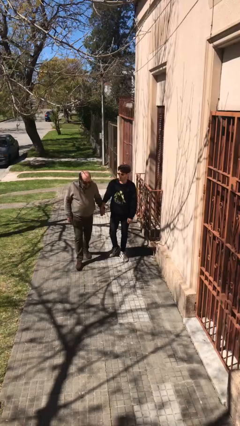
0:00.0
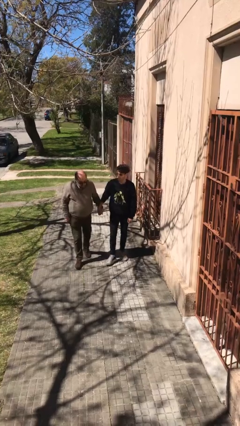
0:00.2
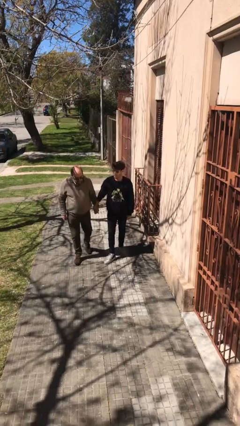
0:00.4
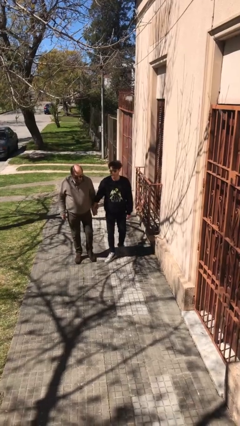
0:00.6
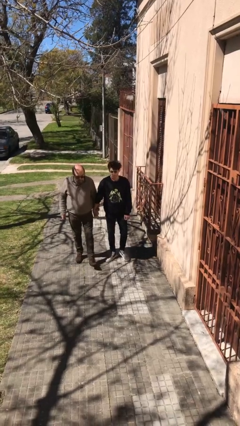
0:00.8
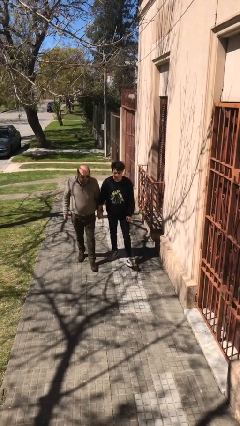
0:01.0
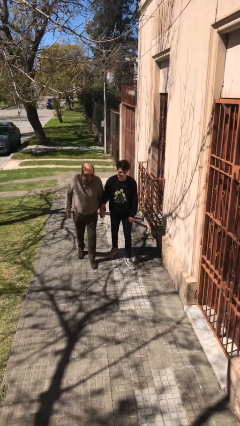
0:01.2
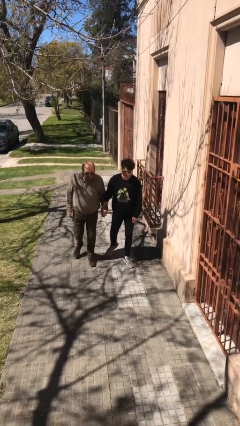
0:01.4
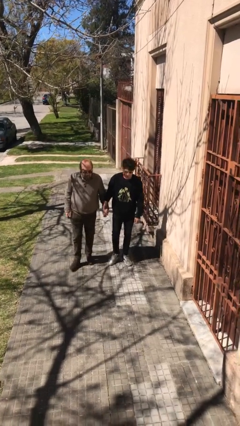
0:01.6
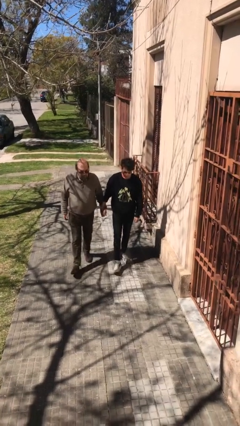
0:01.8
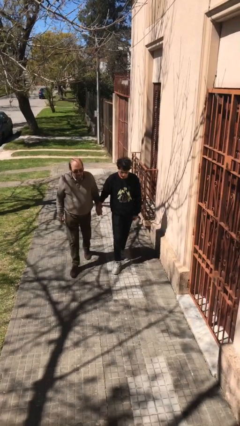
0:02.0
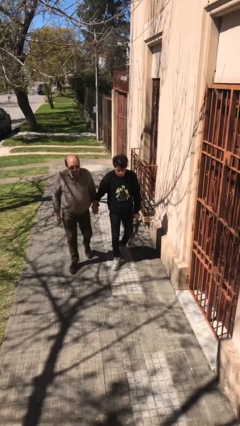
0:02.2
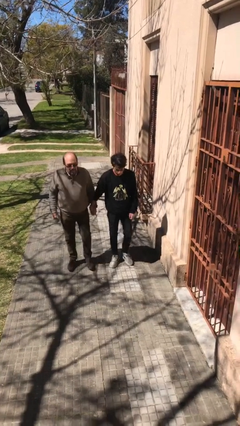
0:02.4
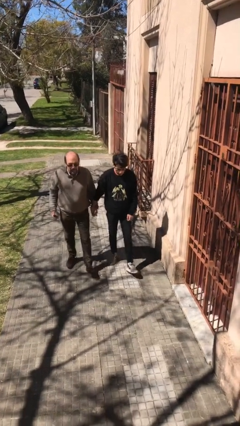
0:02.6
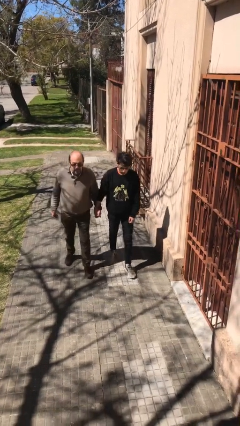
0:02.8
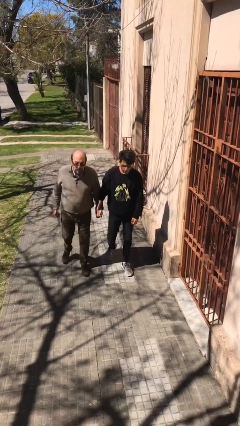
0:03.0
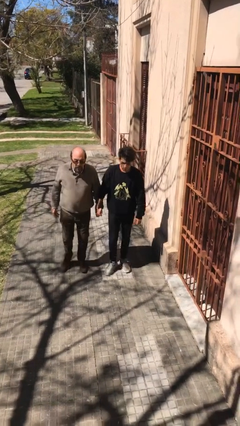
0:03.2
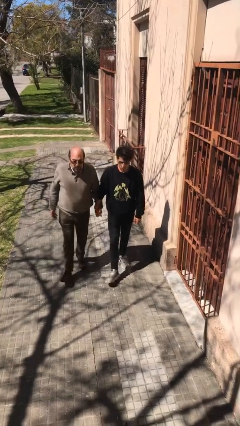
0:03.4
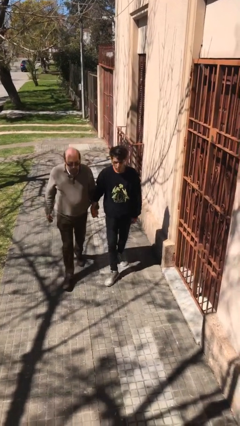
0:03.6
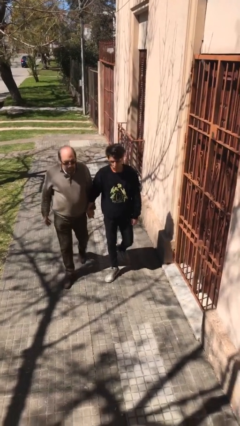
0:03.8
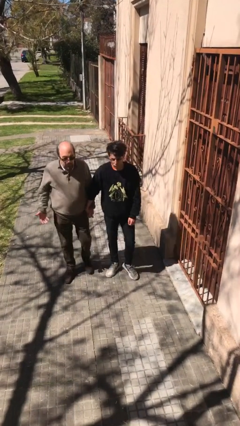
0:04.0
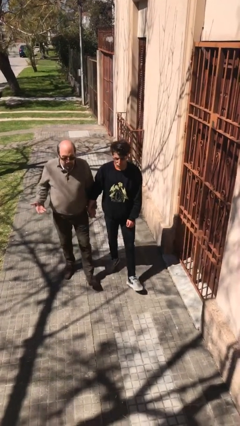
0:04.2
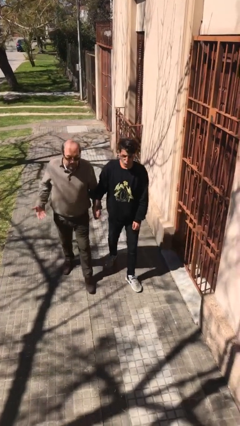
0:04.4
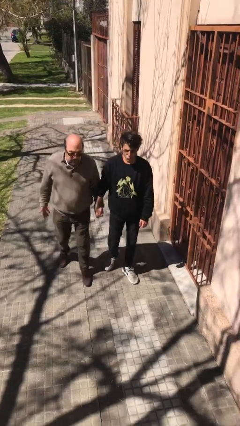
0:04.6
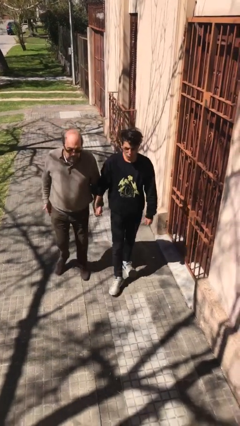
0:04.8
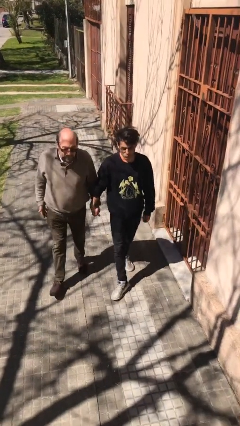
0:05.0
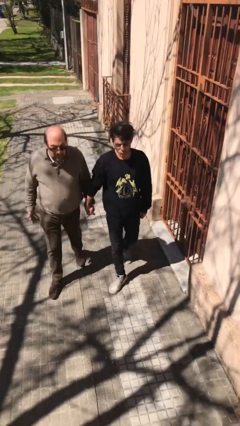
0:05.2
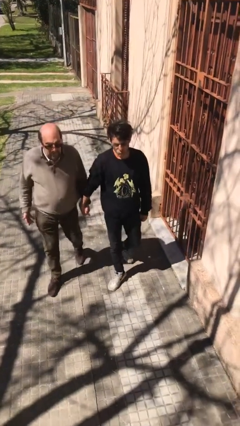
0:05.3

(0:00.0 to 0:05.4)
person holds hand

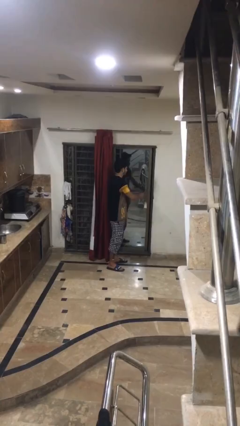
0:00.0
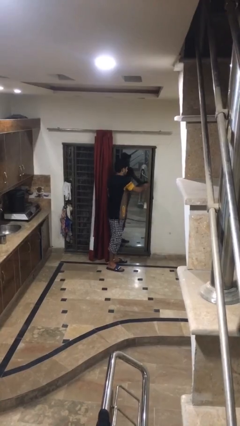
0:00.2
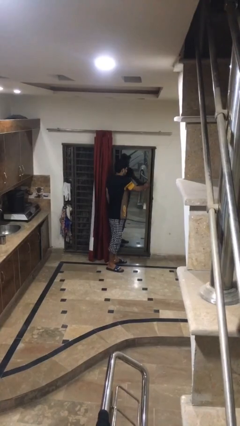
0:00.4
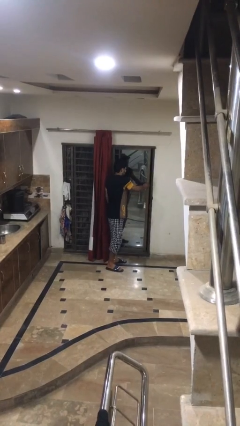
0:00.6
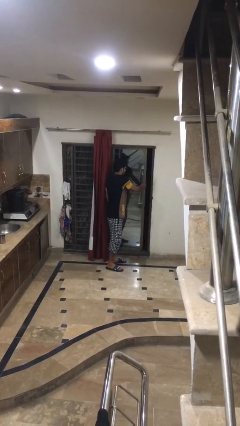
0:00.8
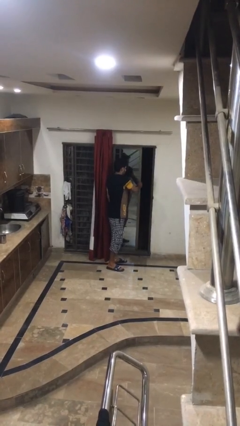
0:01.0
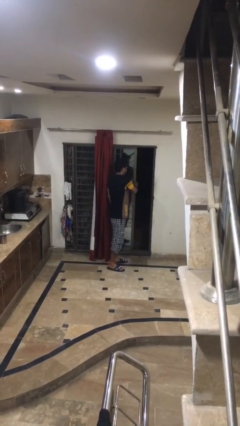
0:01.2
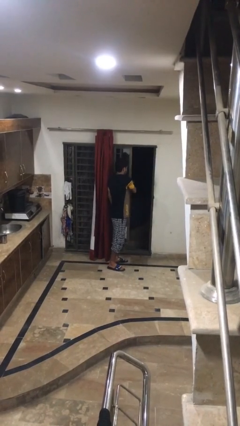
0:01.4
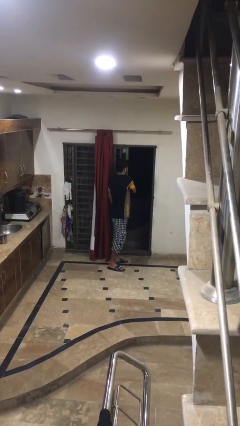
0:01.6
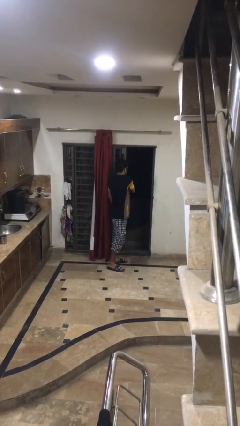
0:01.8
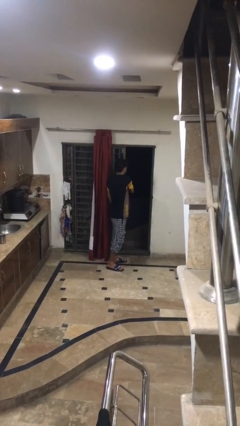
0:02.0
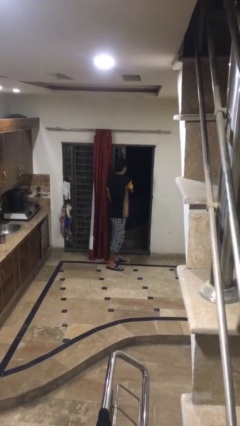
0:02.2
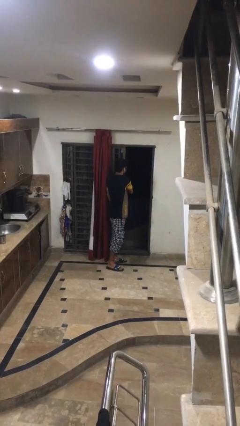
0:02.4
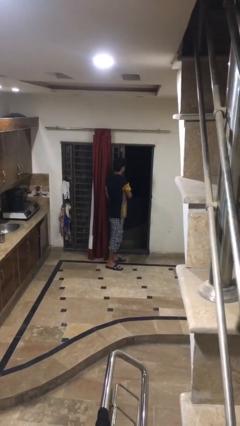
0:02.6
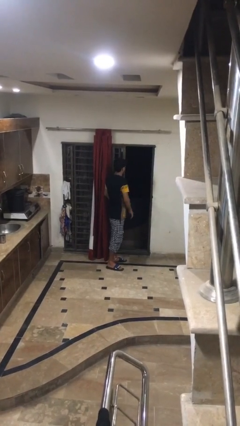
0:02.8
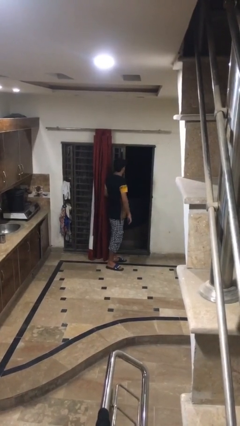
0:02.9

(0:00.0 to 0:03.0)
person opens home window

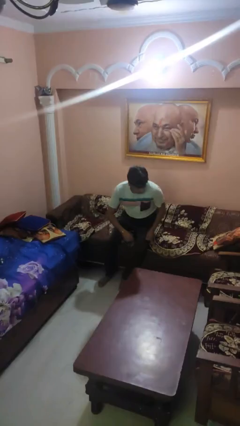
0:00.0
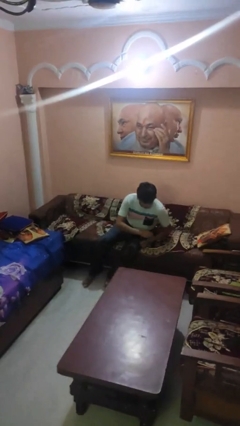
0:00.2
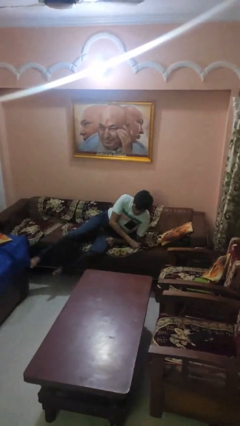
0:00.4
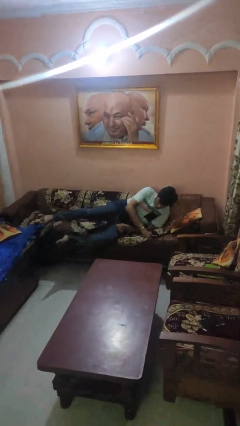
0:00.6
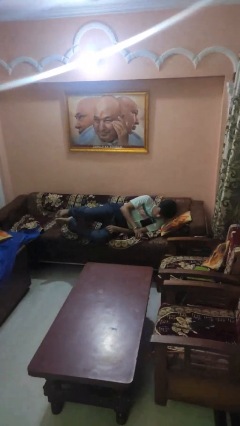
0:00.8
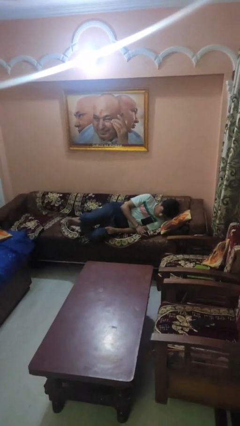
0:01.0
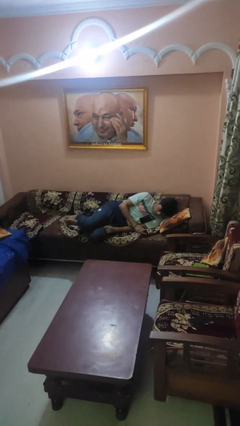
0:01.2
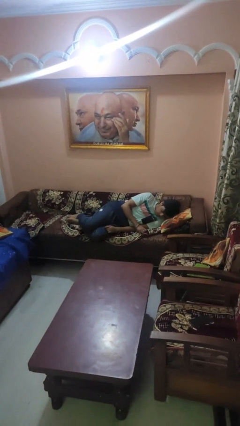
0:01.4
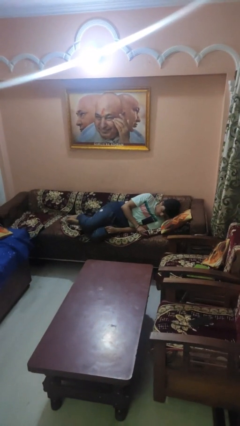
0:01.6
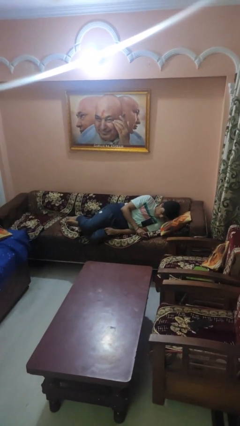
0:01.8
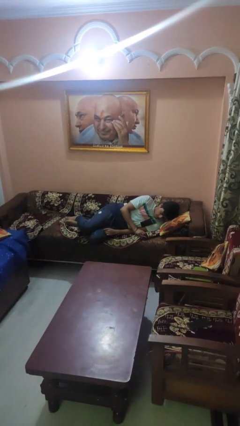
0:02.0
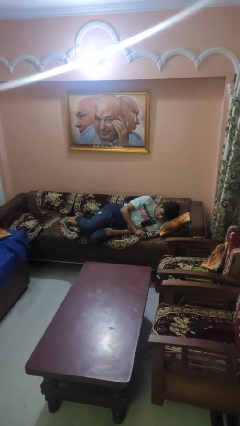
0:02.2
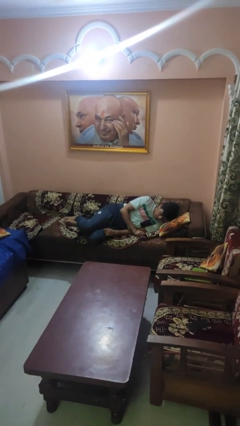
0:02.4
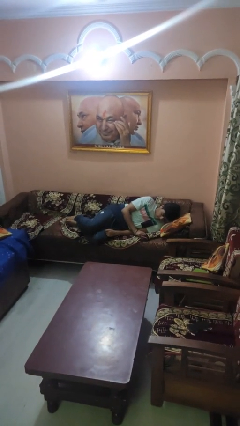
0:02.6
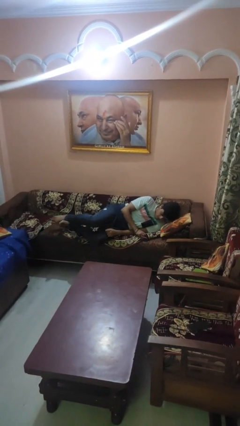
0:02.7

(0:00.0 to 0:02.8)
person lies down on couch

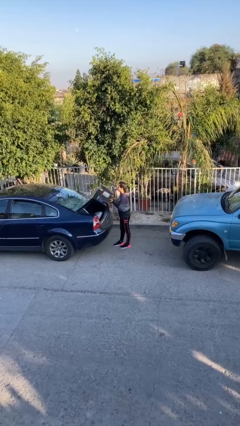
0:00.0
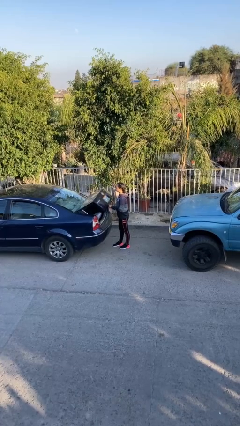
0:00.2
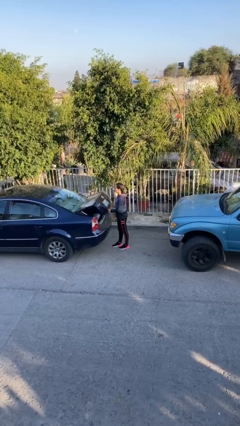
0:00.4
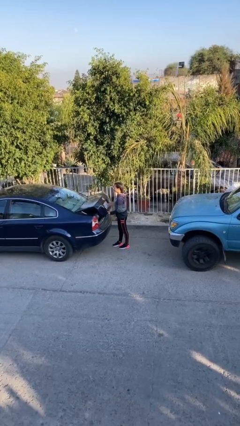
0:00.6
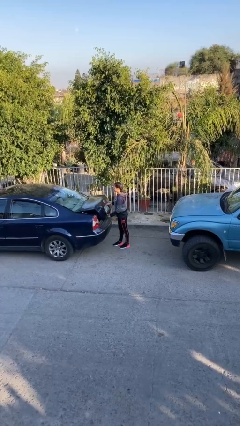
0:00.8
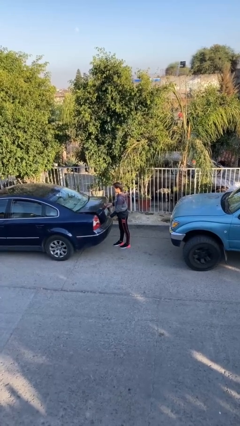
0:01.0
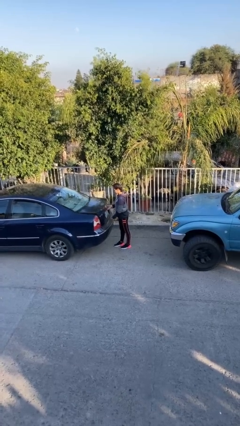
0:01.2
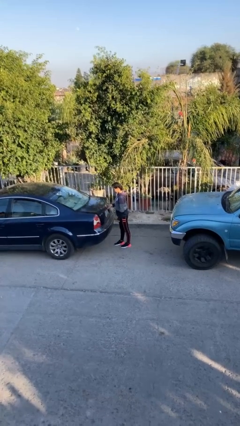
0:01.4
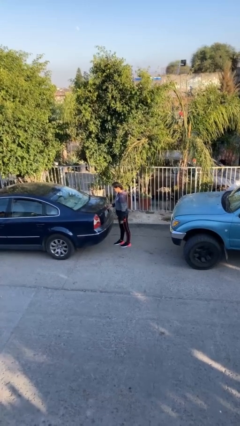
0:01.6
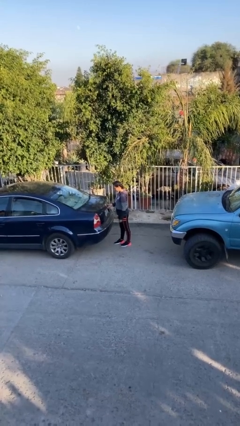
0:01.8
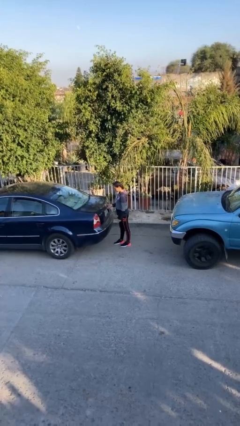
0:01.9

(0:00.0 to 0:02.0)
person closes car trunk

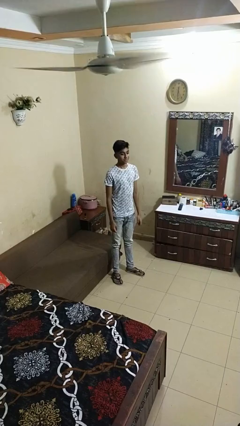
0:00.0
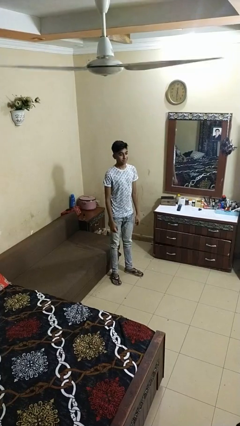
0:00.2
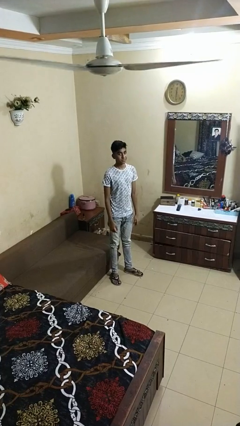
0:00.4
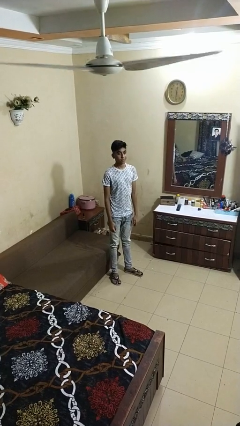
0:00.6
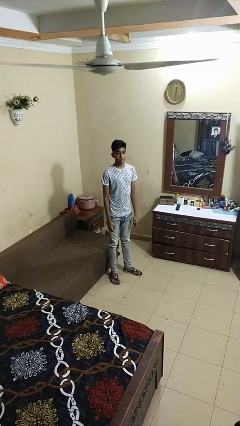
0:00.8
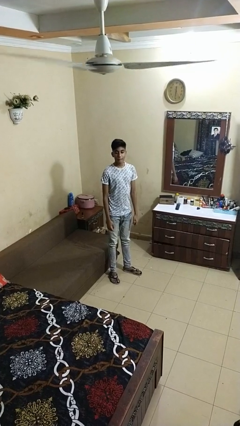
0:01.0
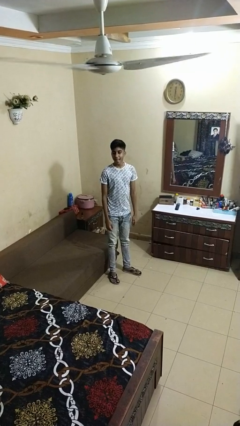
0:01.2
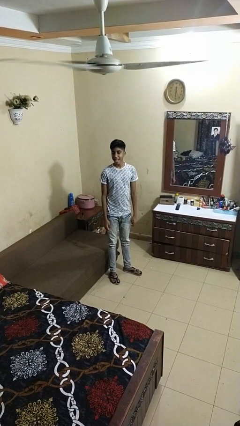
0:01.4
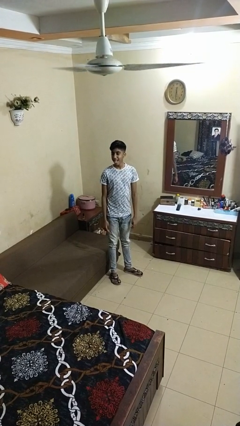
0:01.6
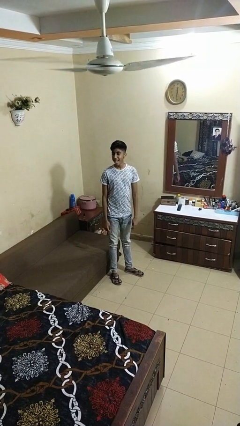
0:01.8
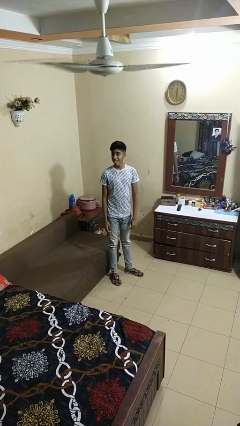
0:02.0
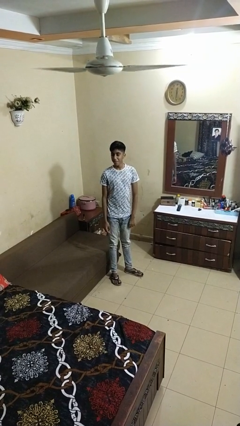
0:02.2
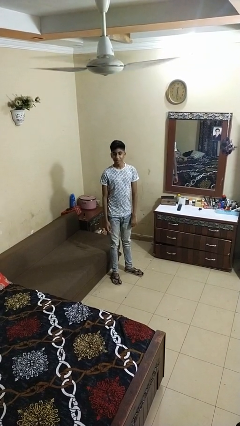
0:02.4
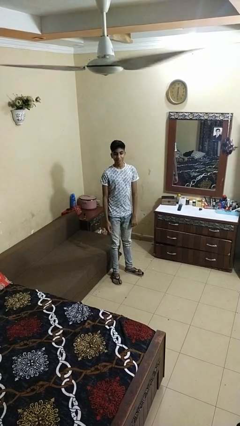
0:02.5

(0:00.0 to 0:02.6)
person sticks out tongue

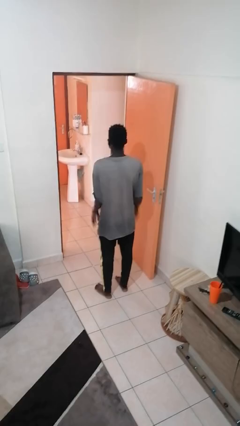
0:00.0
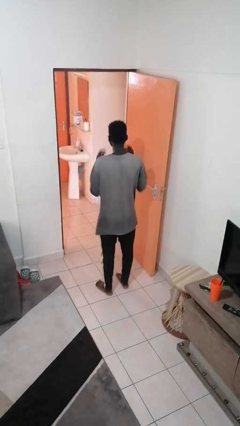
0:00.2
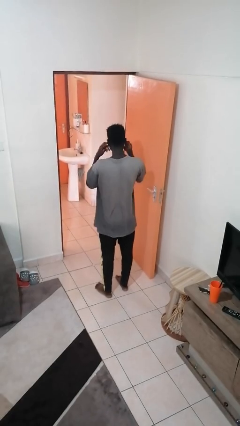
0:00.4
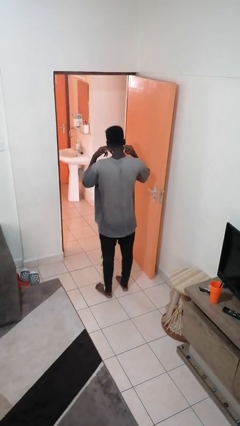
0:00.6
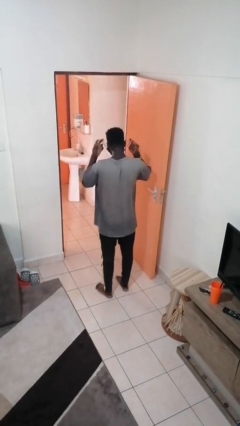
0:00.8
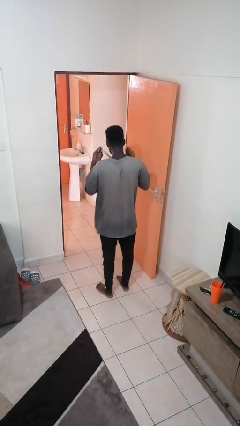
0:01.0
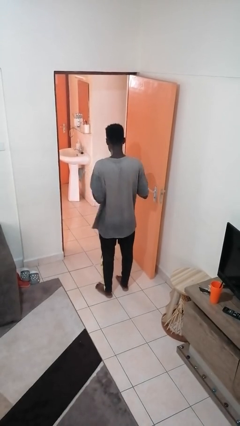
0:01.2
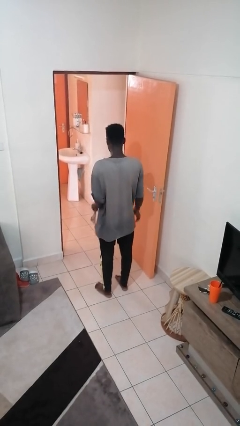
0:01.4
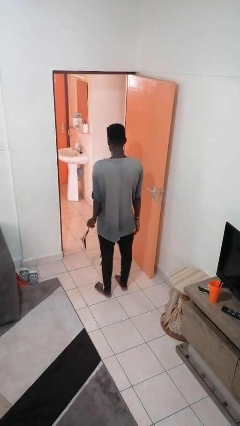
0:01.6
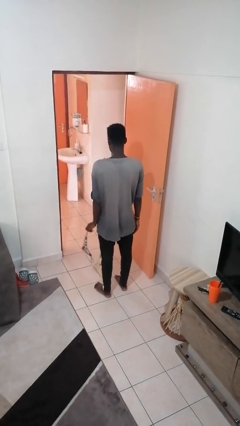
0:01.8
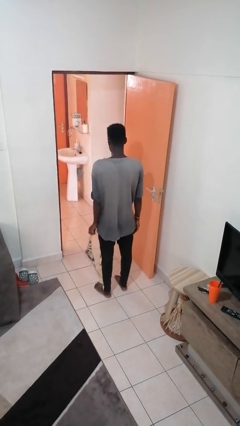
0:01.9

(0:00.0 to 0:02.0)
person takes off facemask
